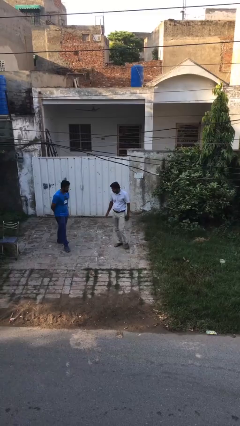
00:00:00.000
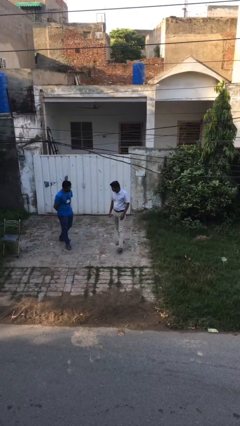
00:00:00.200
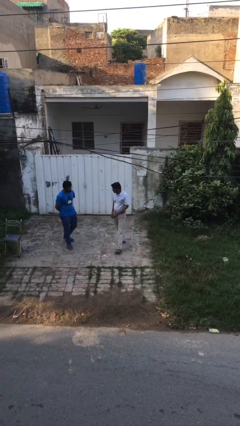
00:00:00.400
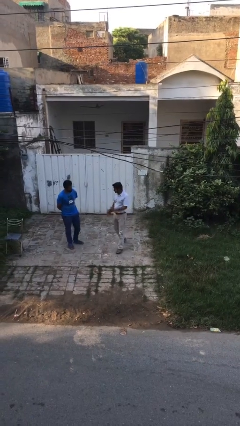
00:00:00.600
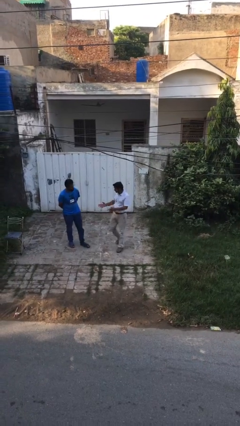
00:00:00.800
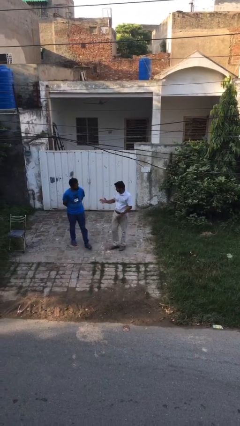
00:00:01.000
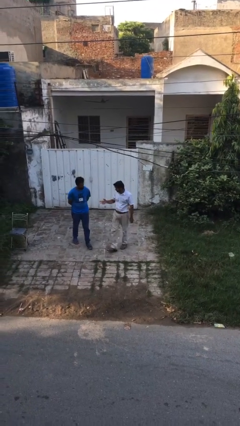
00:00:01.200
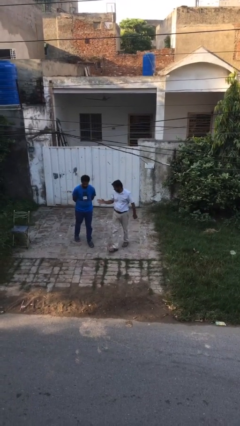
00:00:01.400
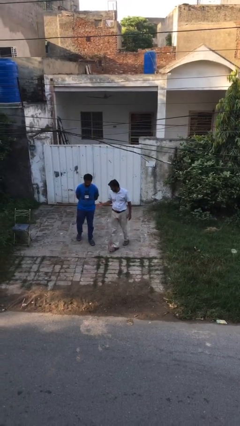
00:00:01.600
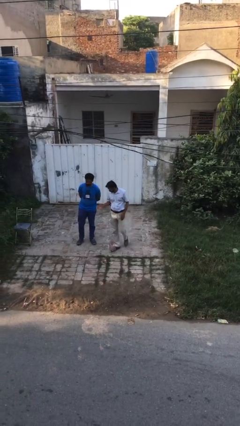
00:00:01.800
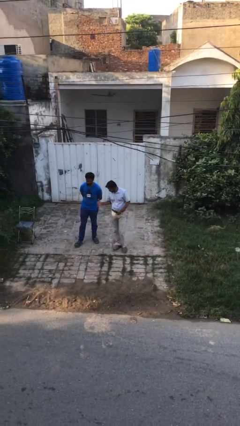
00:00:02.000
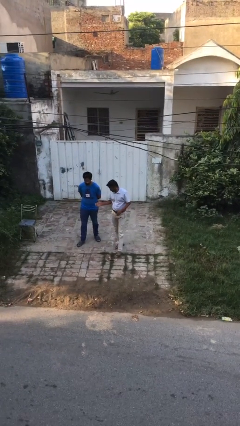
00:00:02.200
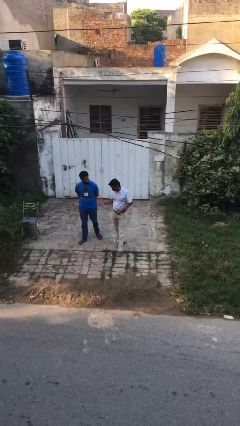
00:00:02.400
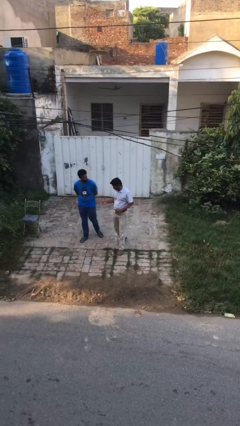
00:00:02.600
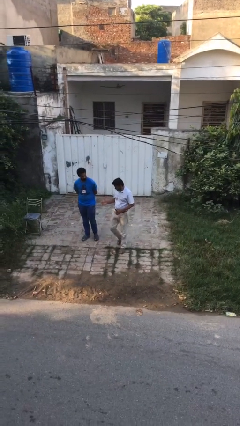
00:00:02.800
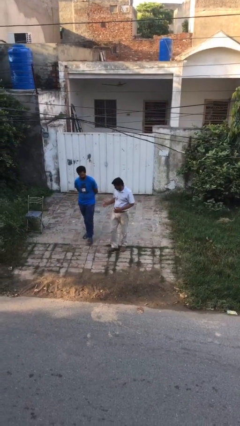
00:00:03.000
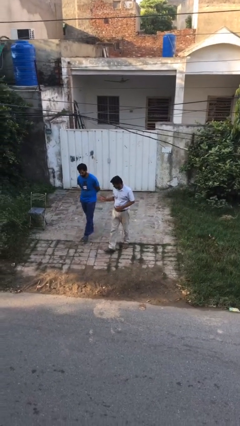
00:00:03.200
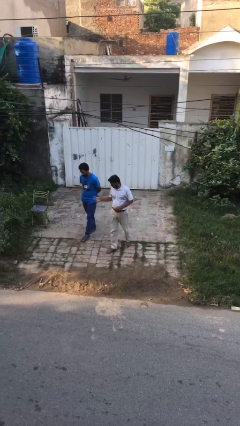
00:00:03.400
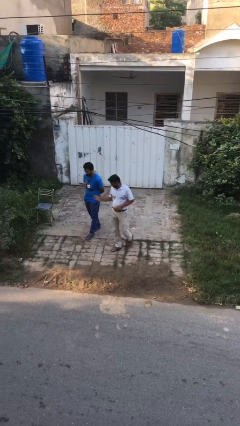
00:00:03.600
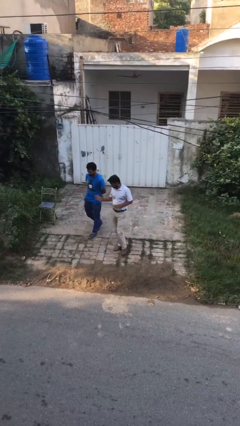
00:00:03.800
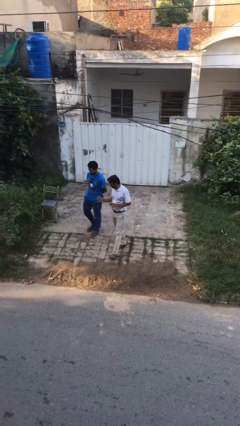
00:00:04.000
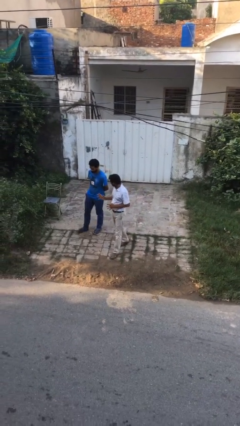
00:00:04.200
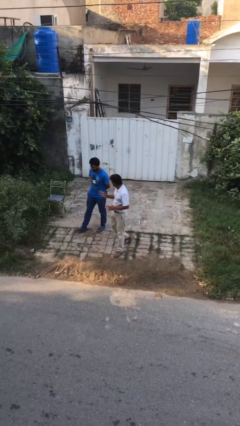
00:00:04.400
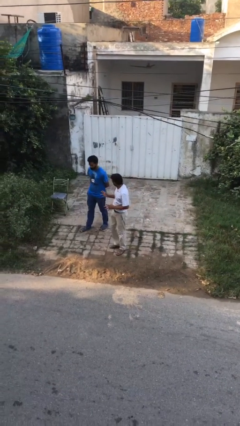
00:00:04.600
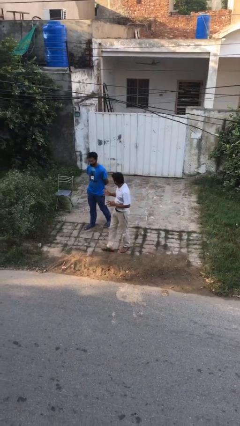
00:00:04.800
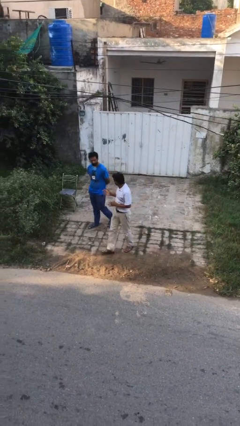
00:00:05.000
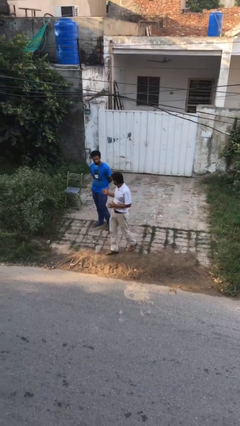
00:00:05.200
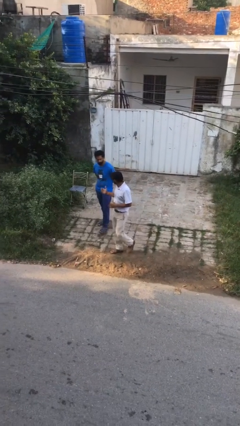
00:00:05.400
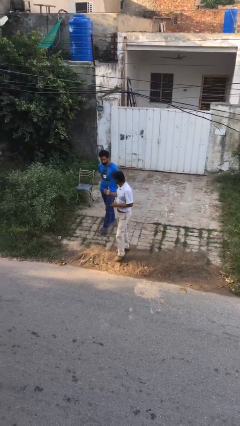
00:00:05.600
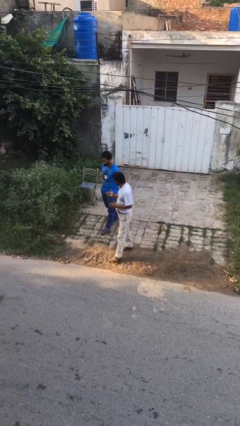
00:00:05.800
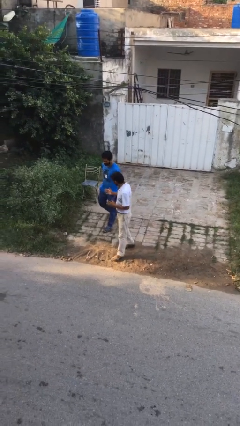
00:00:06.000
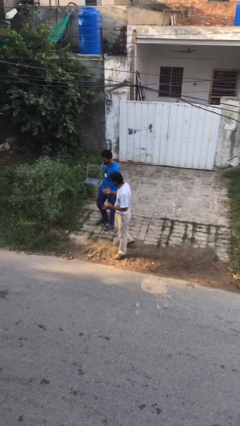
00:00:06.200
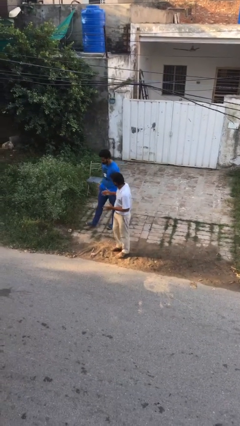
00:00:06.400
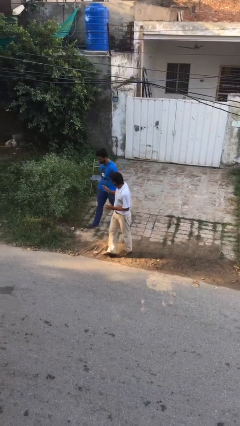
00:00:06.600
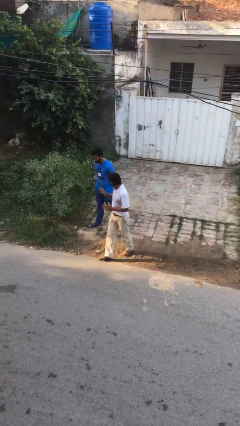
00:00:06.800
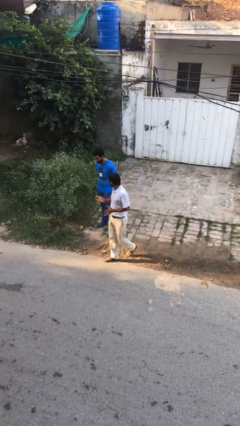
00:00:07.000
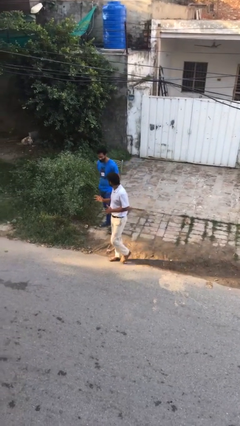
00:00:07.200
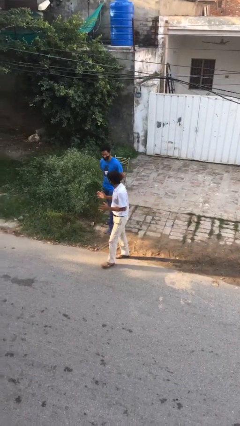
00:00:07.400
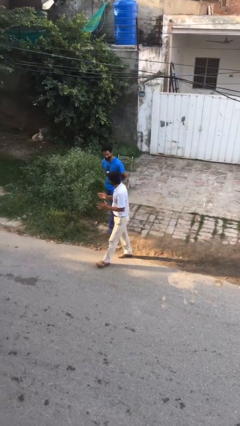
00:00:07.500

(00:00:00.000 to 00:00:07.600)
person talks to person

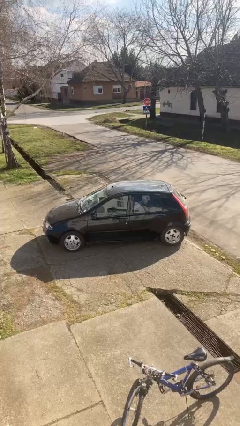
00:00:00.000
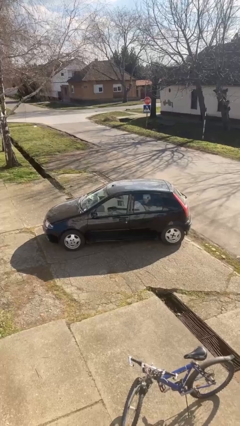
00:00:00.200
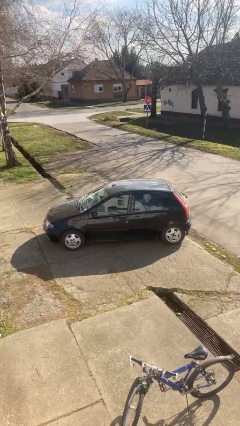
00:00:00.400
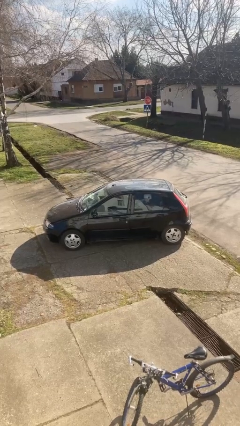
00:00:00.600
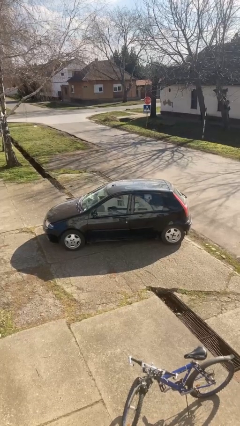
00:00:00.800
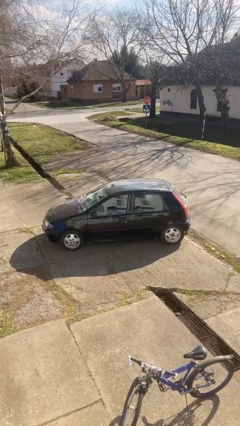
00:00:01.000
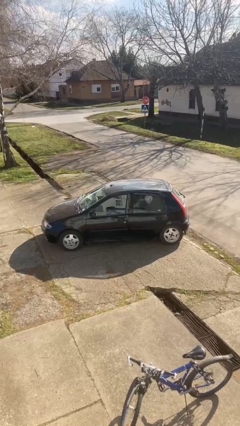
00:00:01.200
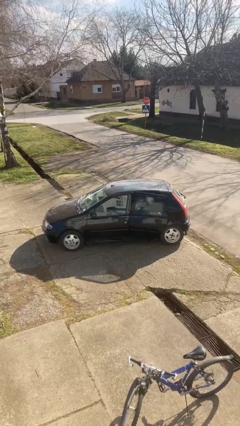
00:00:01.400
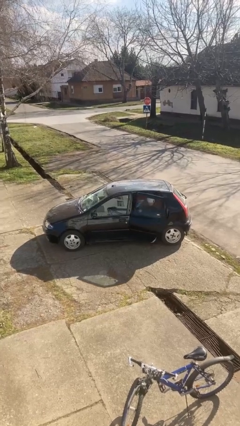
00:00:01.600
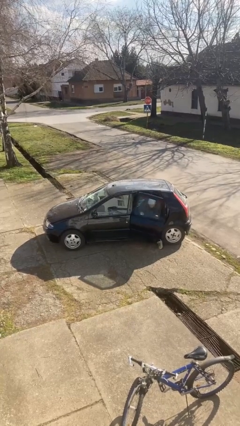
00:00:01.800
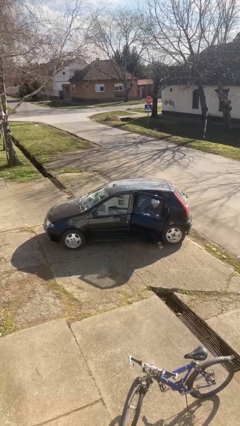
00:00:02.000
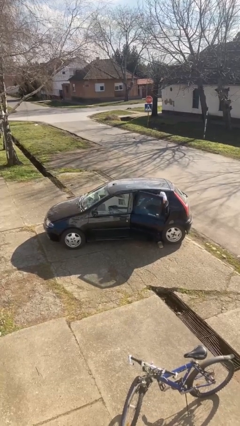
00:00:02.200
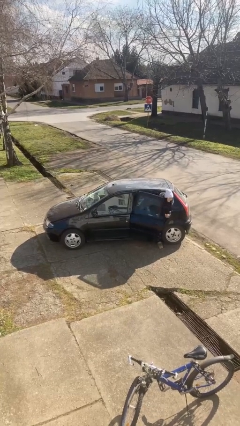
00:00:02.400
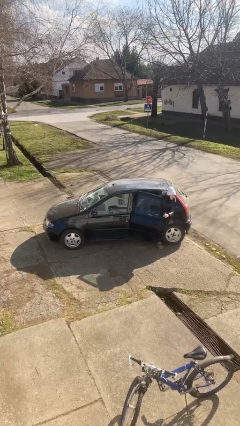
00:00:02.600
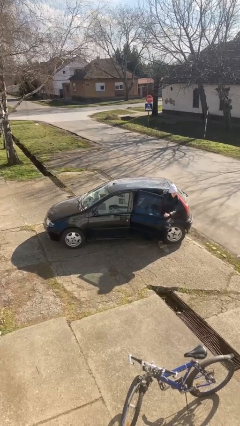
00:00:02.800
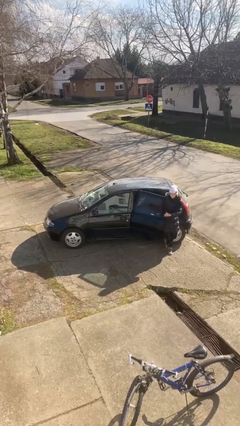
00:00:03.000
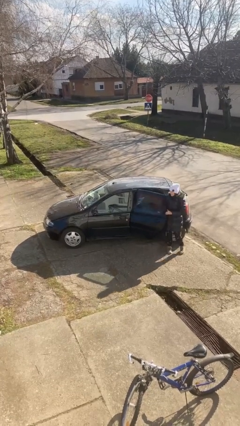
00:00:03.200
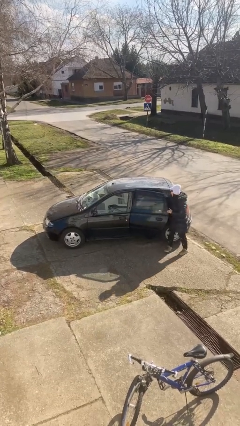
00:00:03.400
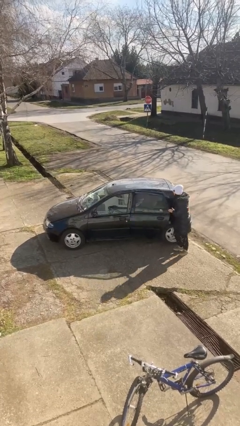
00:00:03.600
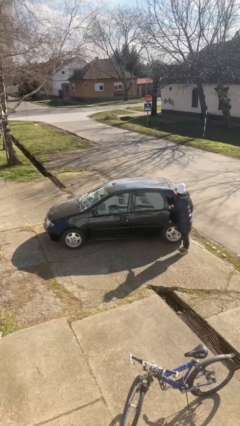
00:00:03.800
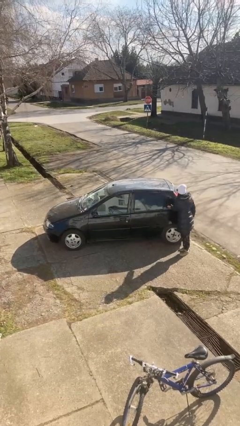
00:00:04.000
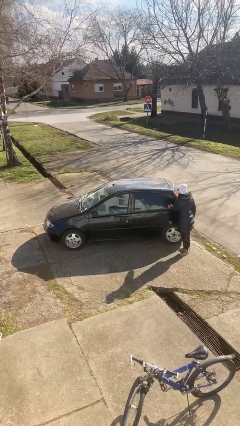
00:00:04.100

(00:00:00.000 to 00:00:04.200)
car drops off person

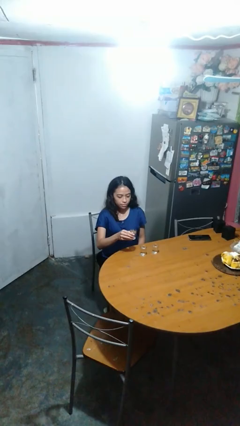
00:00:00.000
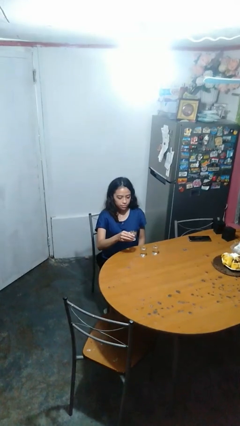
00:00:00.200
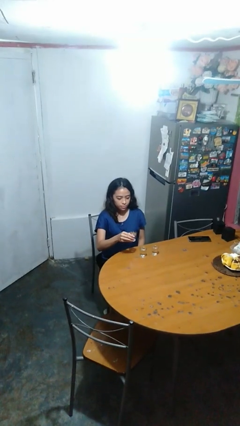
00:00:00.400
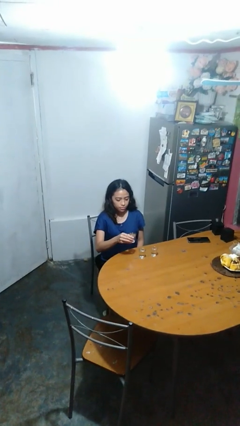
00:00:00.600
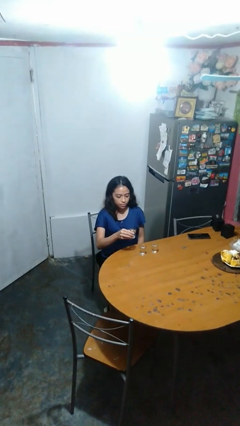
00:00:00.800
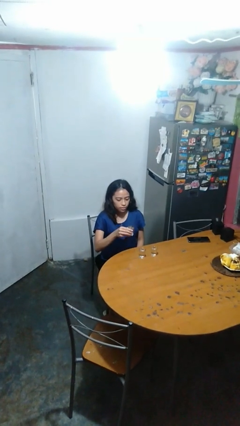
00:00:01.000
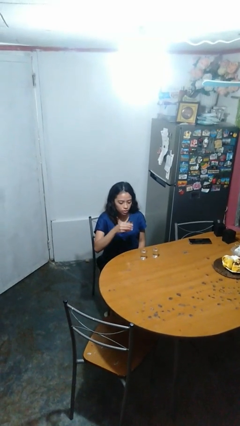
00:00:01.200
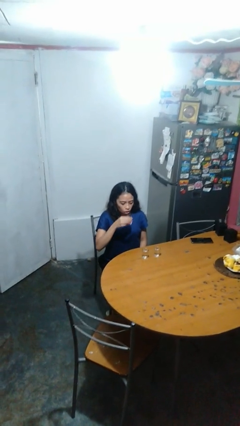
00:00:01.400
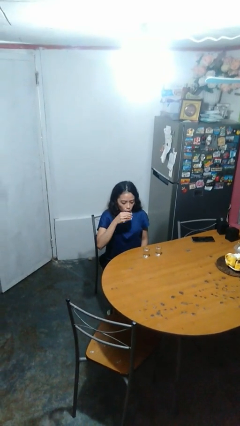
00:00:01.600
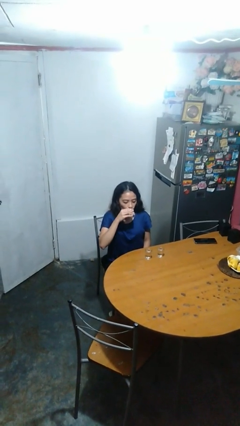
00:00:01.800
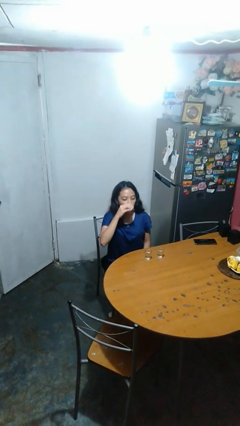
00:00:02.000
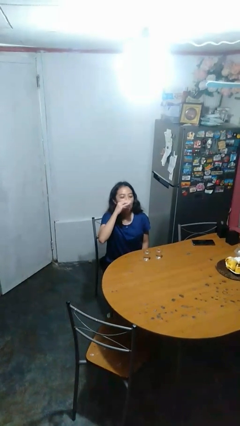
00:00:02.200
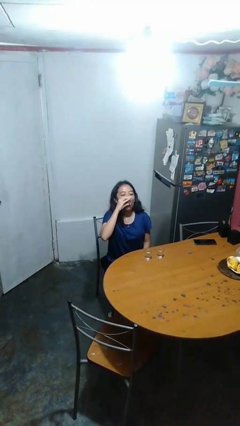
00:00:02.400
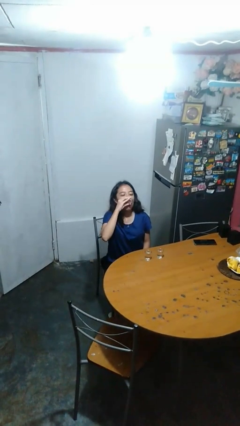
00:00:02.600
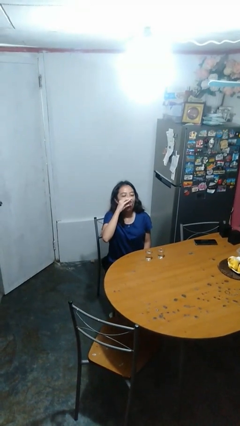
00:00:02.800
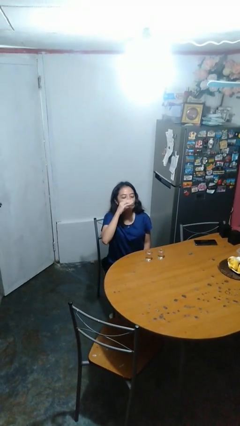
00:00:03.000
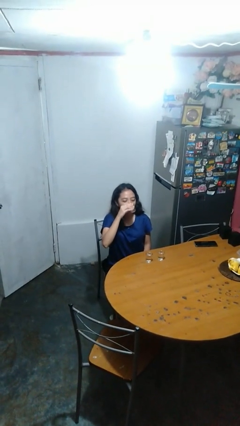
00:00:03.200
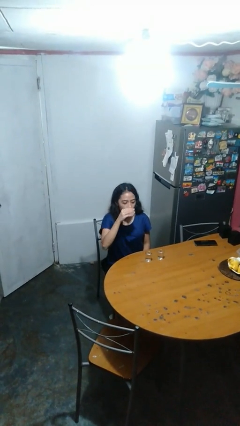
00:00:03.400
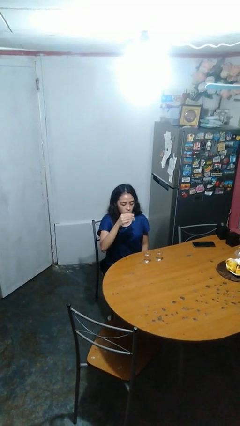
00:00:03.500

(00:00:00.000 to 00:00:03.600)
person drinks from shotglass

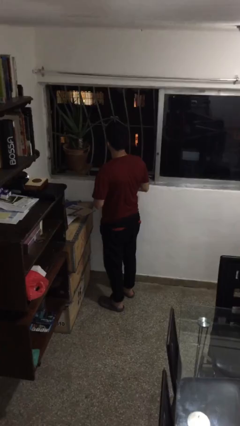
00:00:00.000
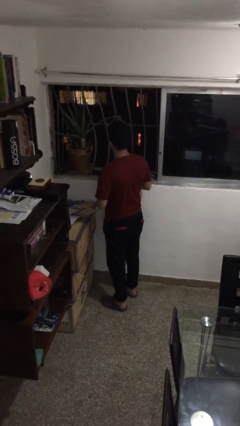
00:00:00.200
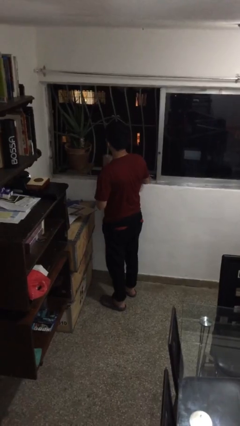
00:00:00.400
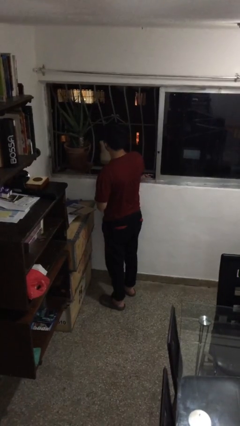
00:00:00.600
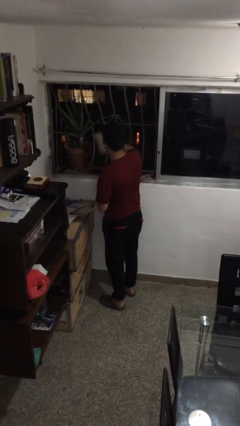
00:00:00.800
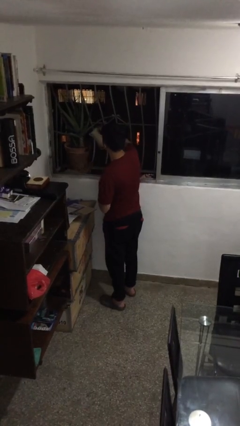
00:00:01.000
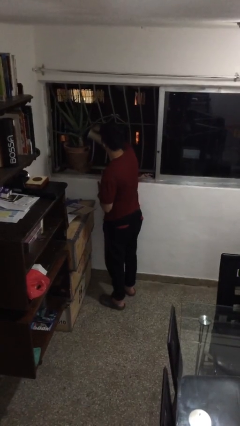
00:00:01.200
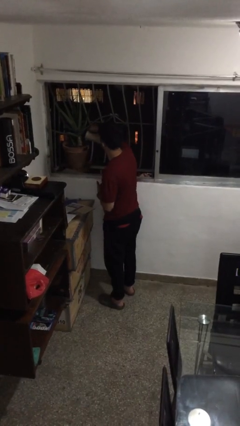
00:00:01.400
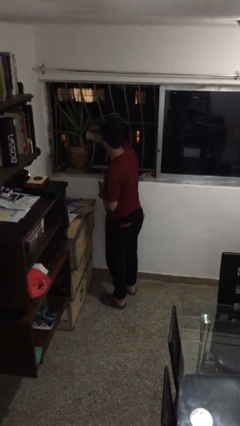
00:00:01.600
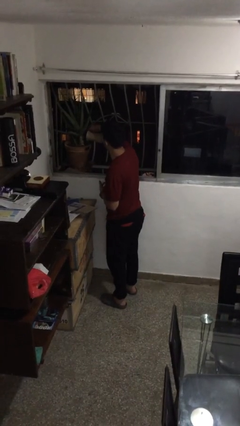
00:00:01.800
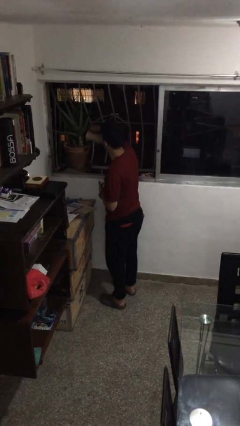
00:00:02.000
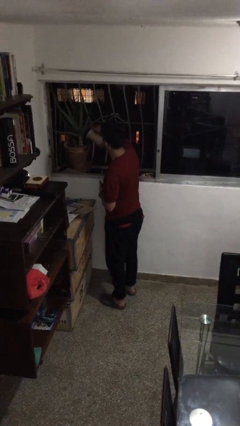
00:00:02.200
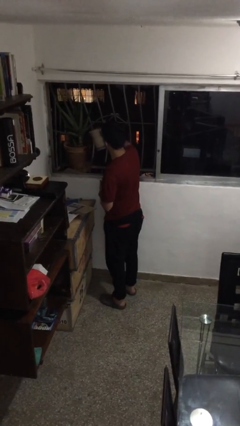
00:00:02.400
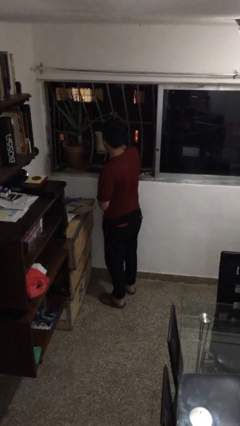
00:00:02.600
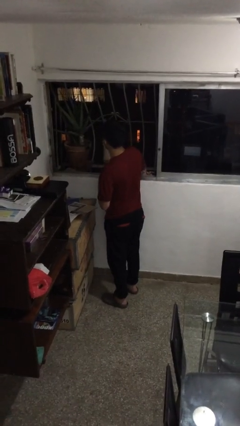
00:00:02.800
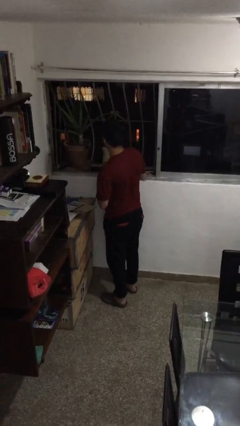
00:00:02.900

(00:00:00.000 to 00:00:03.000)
person waters houseplant
